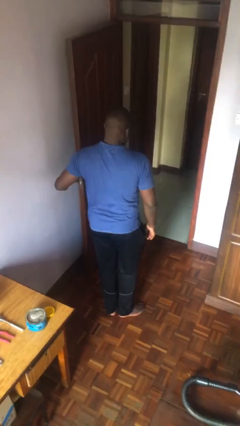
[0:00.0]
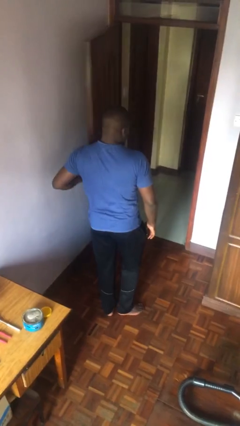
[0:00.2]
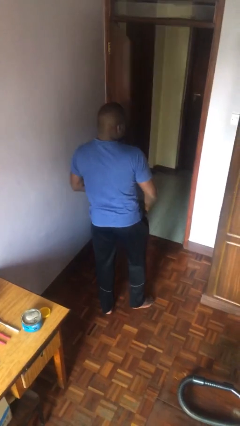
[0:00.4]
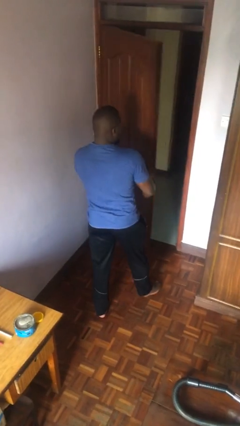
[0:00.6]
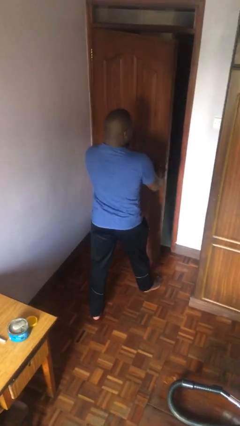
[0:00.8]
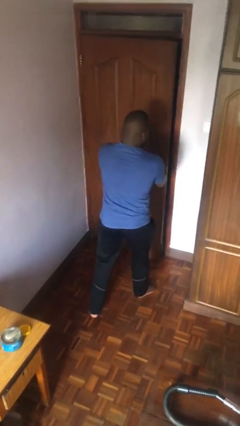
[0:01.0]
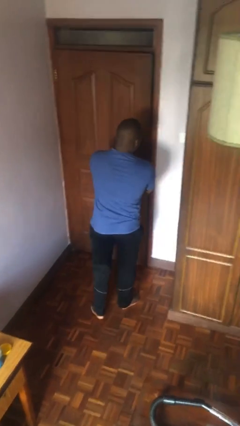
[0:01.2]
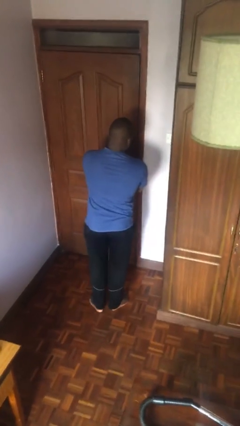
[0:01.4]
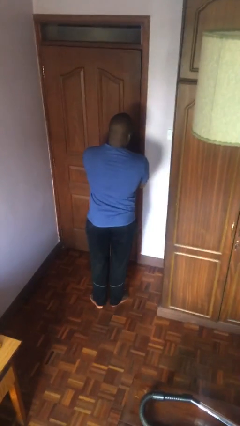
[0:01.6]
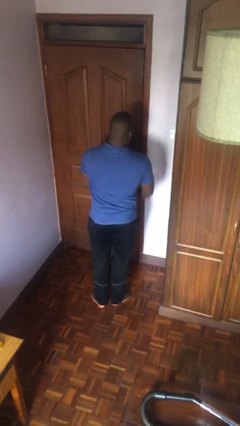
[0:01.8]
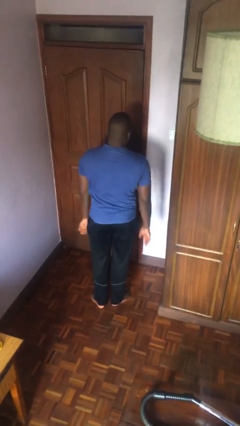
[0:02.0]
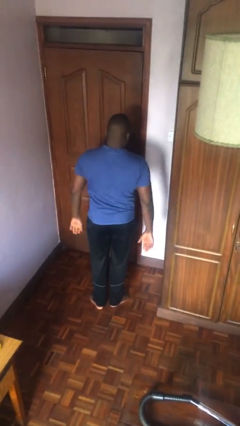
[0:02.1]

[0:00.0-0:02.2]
person closes facility door

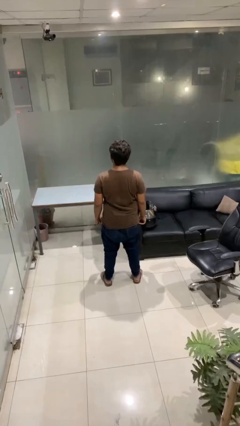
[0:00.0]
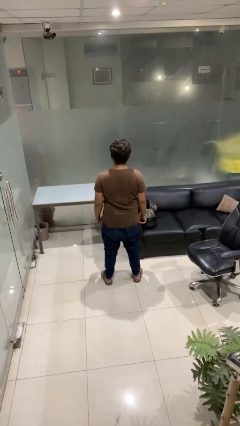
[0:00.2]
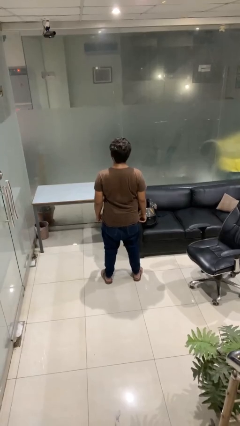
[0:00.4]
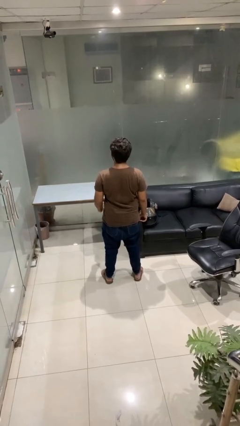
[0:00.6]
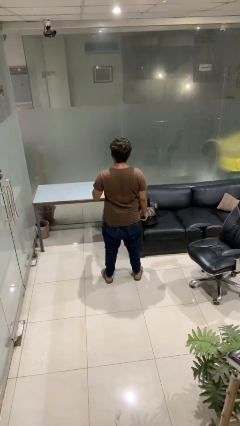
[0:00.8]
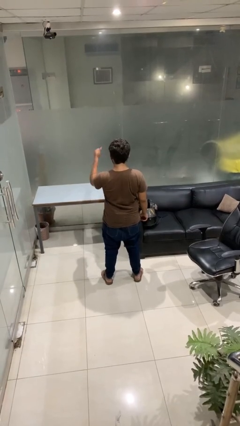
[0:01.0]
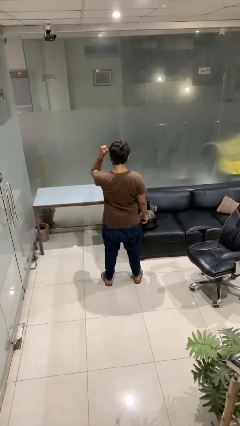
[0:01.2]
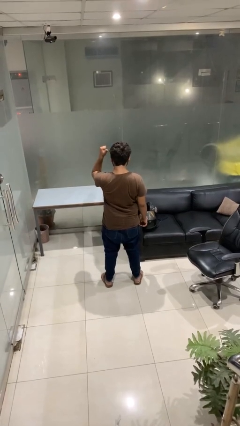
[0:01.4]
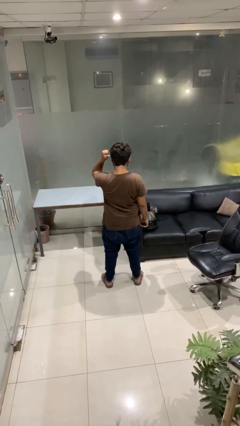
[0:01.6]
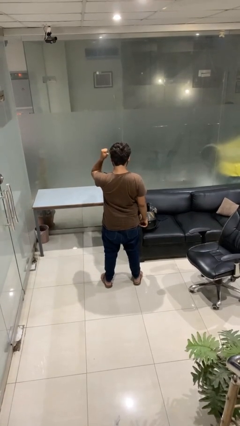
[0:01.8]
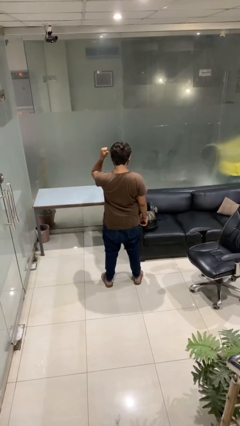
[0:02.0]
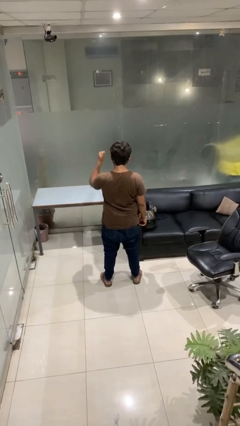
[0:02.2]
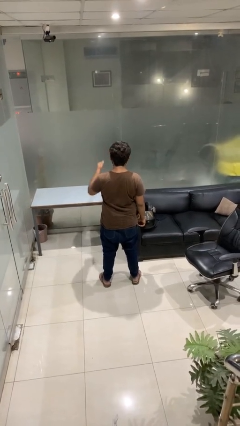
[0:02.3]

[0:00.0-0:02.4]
person gestures behind me

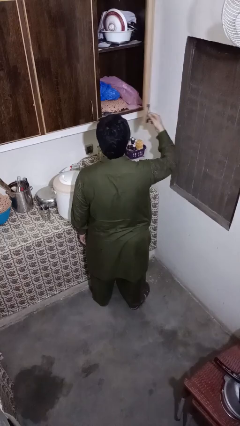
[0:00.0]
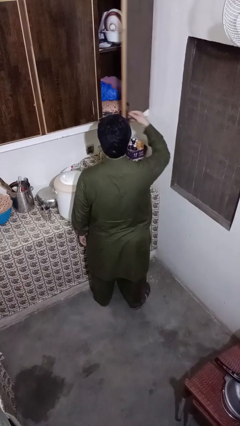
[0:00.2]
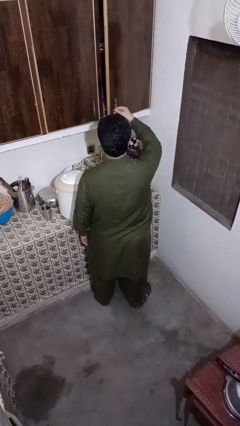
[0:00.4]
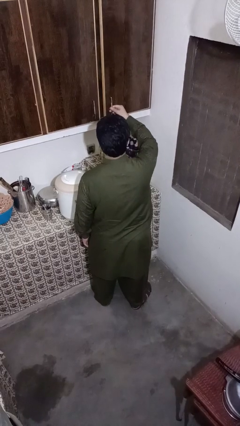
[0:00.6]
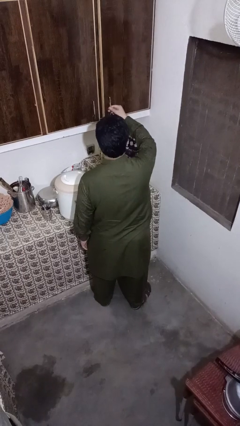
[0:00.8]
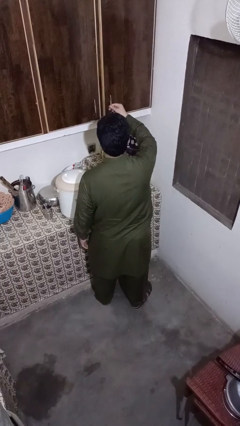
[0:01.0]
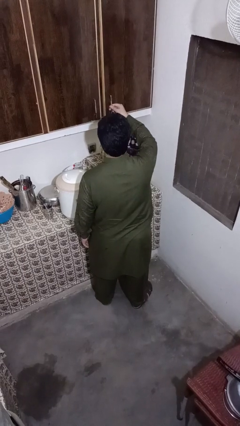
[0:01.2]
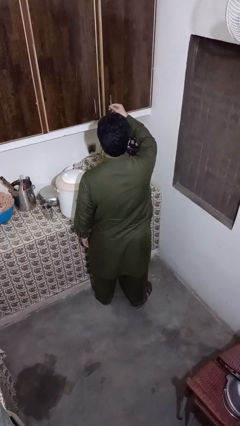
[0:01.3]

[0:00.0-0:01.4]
person closes kitchen drawer

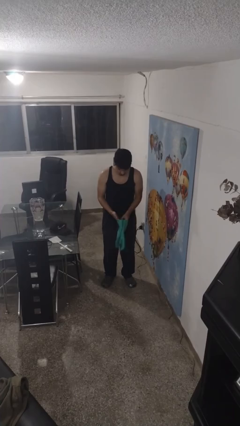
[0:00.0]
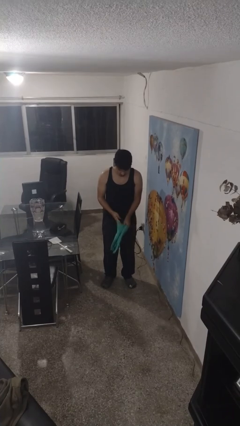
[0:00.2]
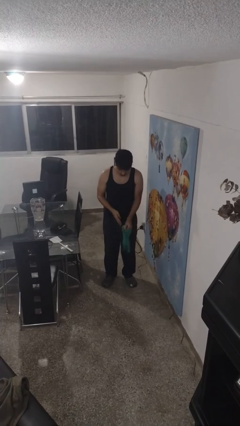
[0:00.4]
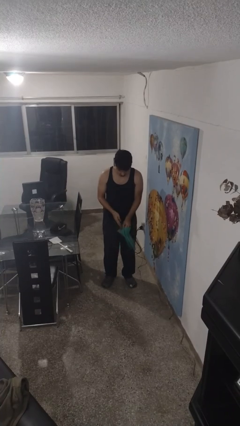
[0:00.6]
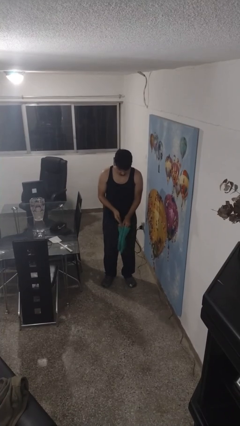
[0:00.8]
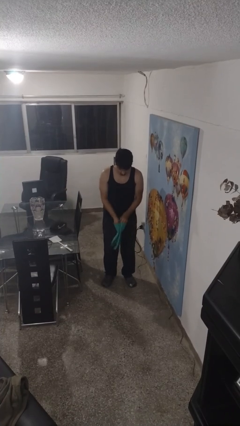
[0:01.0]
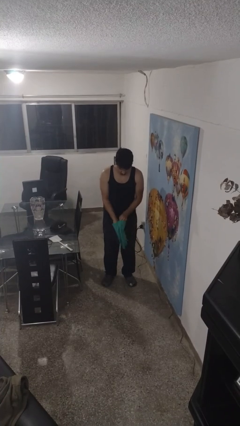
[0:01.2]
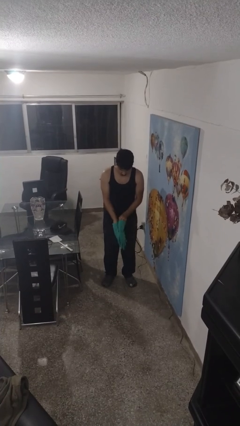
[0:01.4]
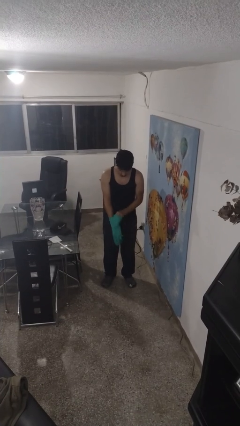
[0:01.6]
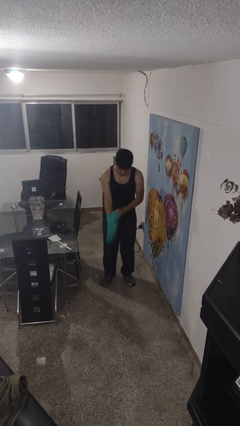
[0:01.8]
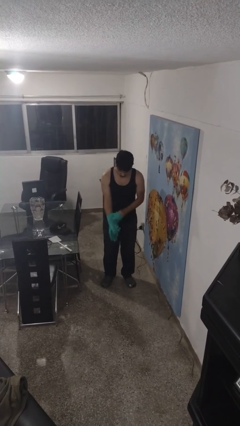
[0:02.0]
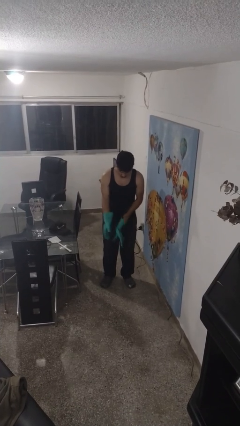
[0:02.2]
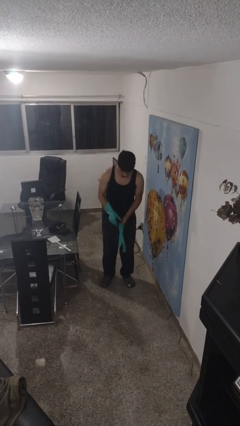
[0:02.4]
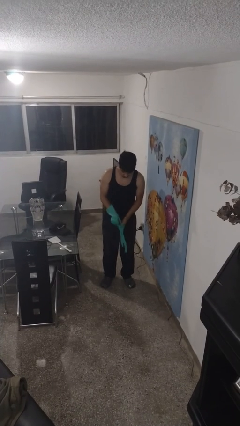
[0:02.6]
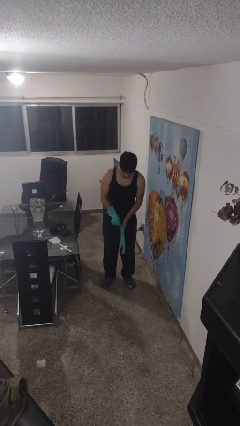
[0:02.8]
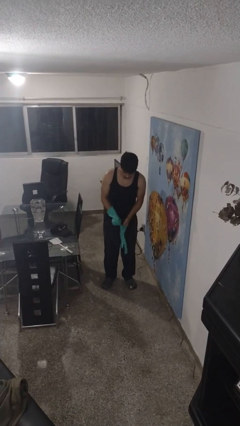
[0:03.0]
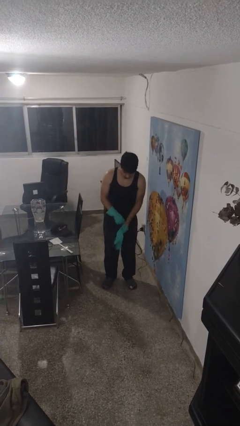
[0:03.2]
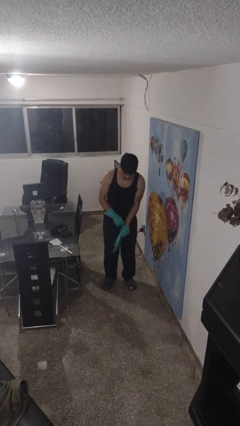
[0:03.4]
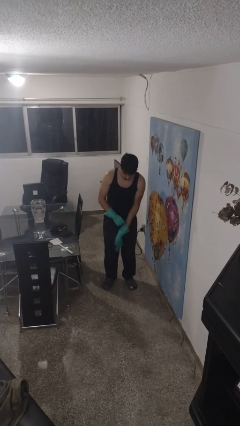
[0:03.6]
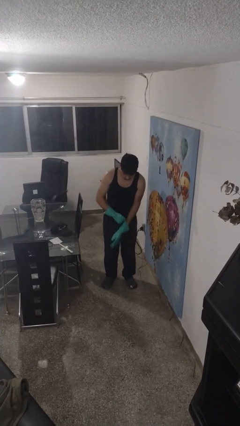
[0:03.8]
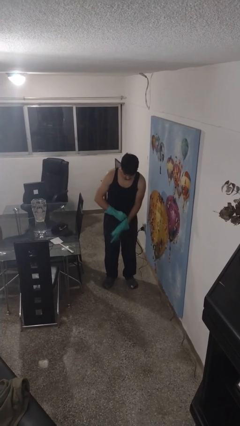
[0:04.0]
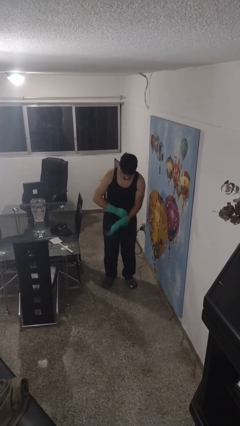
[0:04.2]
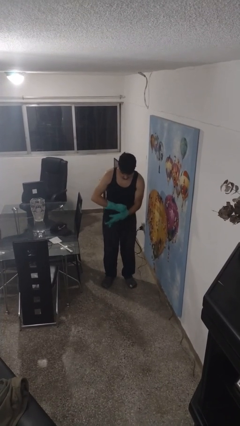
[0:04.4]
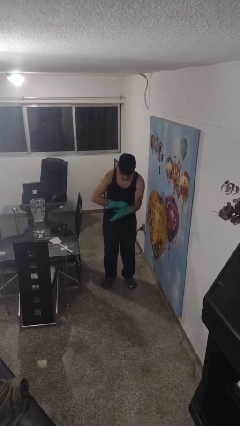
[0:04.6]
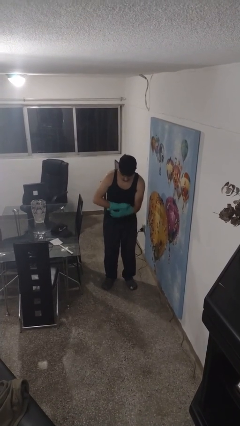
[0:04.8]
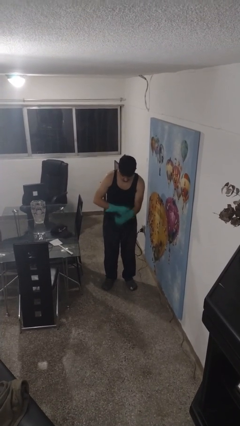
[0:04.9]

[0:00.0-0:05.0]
person puts on gloves

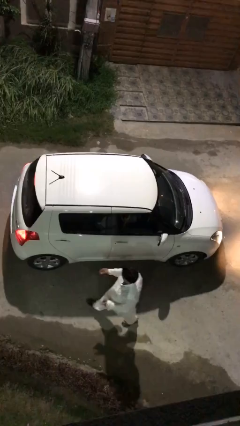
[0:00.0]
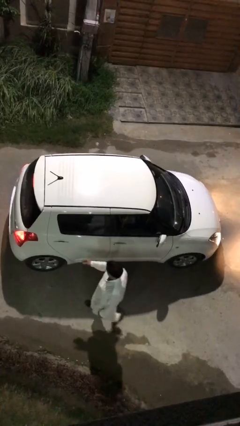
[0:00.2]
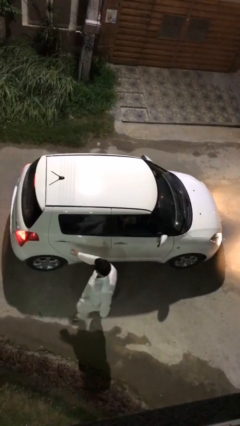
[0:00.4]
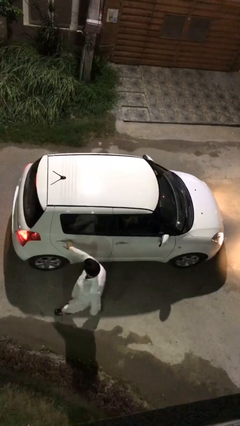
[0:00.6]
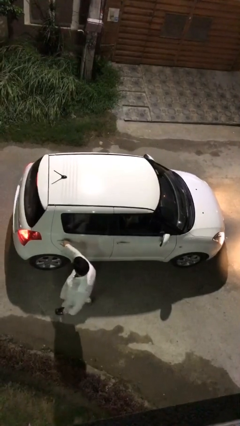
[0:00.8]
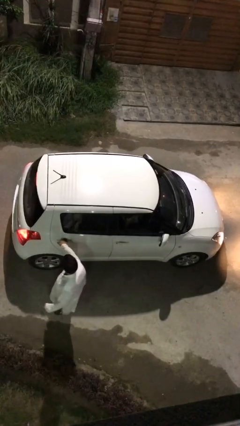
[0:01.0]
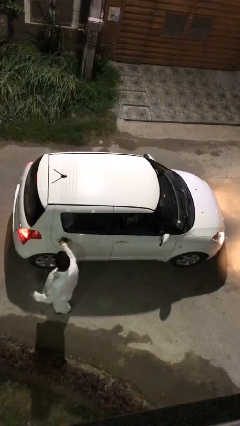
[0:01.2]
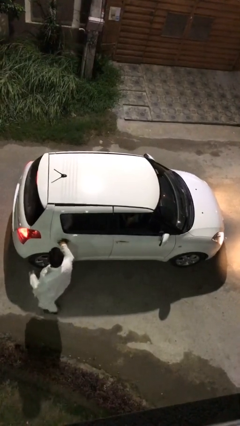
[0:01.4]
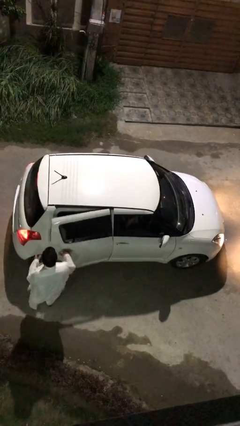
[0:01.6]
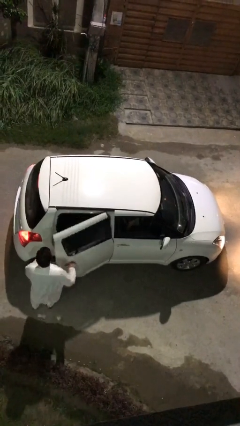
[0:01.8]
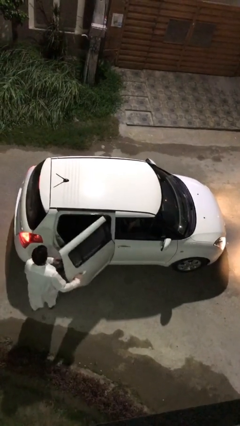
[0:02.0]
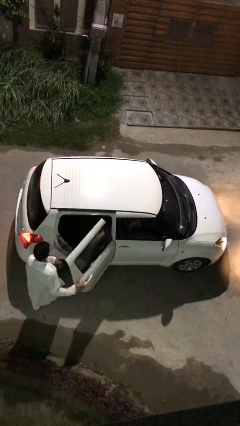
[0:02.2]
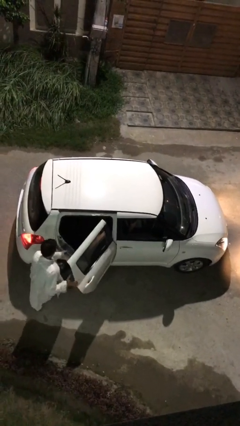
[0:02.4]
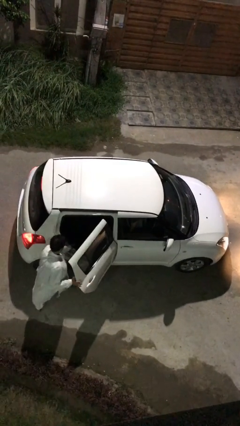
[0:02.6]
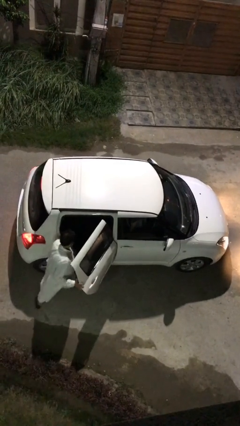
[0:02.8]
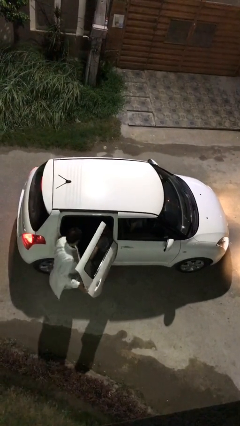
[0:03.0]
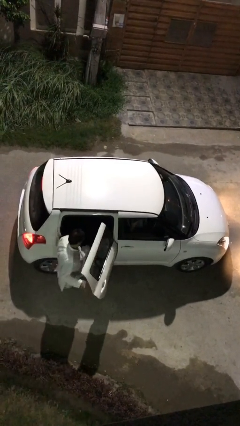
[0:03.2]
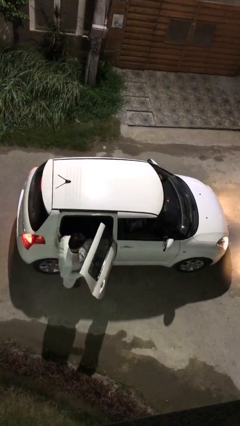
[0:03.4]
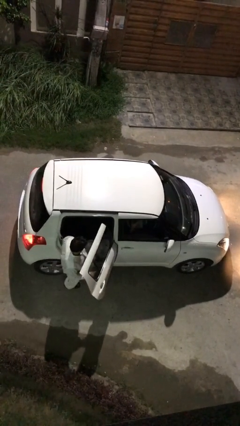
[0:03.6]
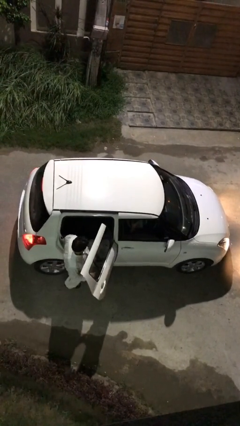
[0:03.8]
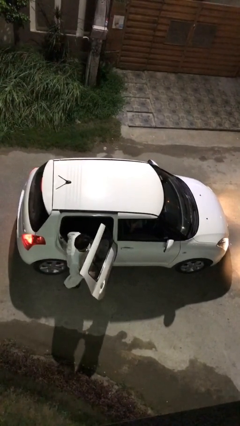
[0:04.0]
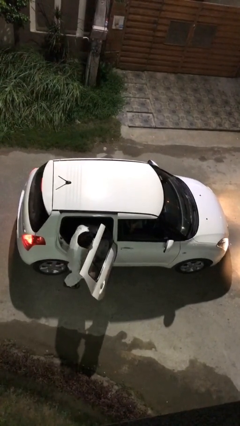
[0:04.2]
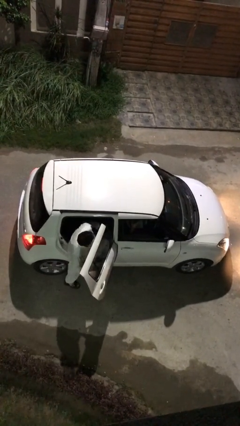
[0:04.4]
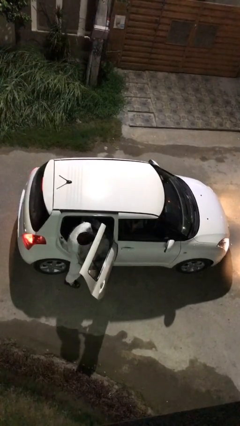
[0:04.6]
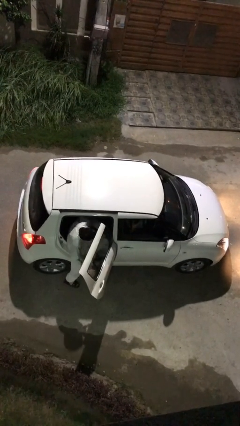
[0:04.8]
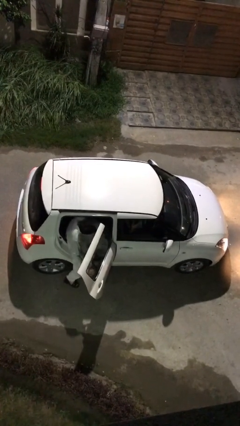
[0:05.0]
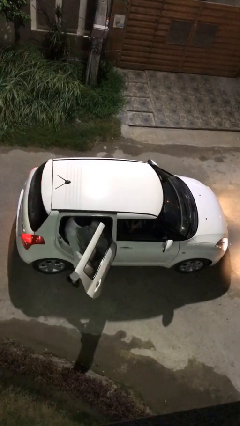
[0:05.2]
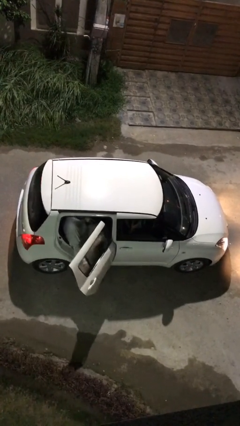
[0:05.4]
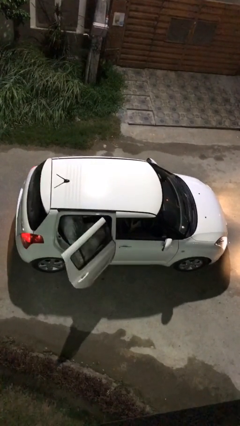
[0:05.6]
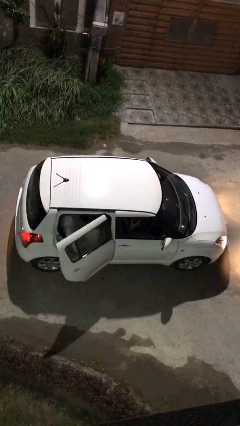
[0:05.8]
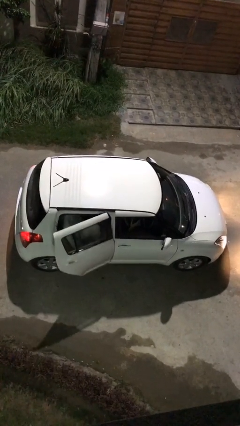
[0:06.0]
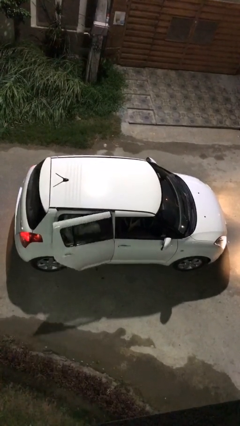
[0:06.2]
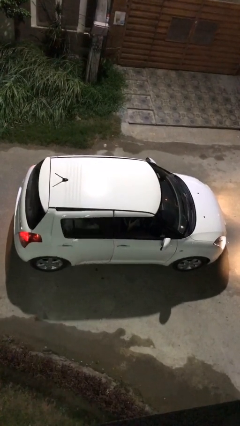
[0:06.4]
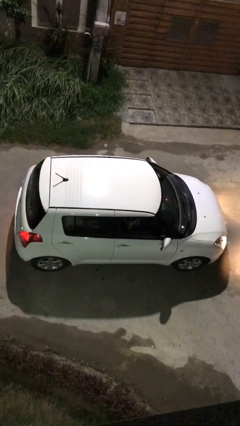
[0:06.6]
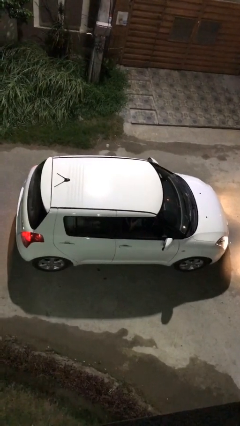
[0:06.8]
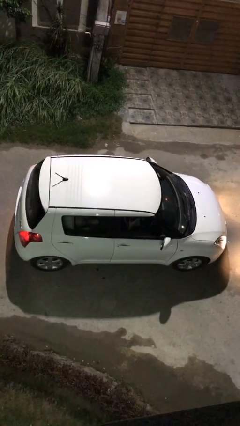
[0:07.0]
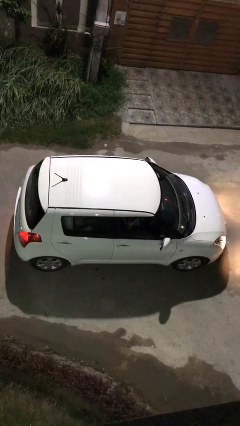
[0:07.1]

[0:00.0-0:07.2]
car picks up person
